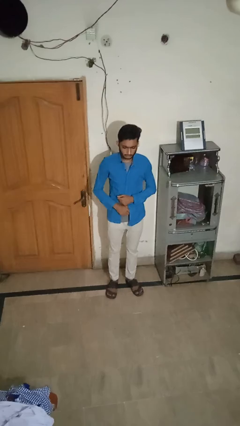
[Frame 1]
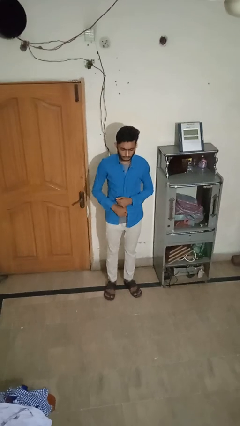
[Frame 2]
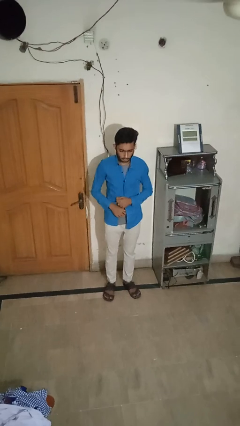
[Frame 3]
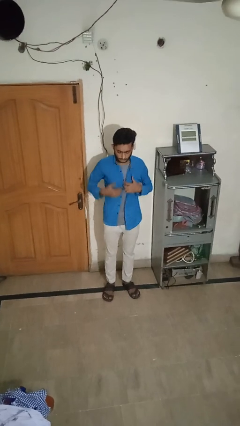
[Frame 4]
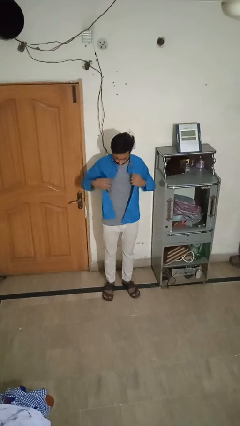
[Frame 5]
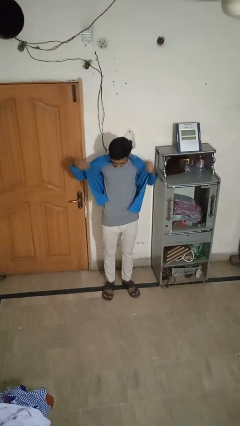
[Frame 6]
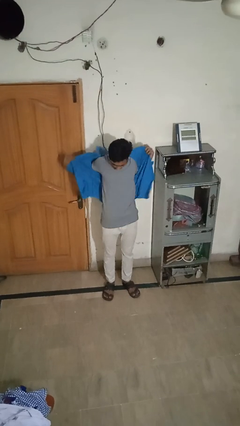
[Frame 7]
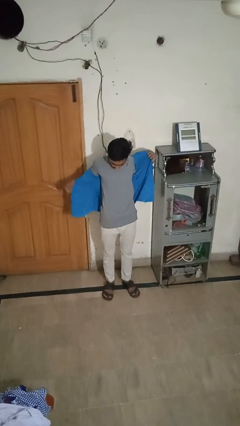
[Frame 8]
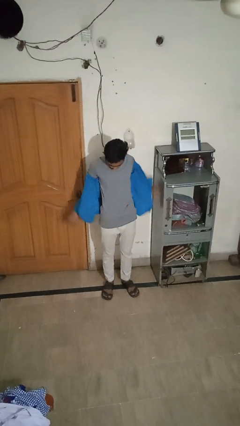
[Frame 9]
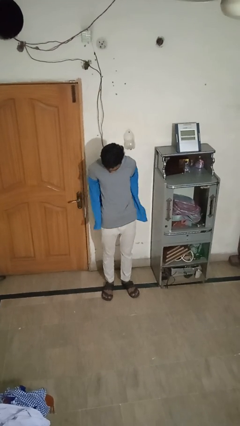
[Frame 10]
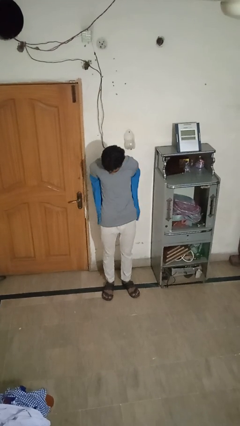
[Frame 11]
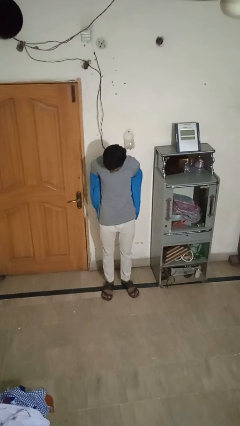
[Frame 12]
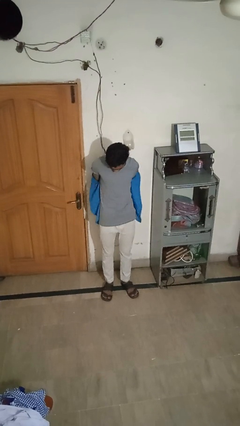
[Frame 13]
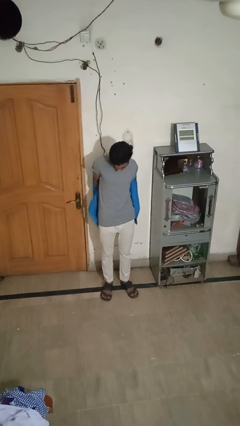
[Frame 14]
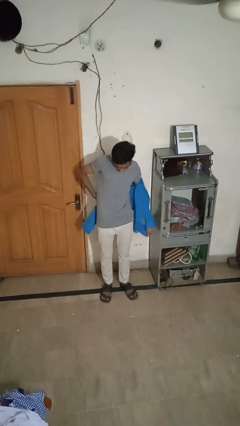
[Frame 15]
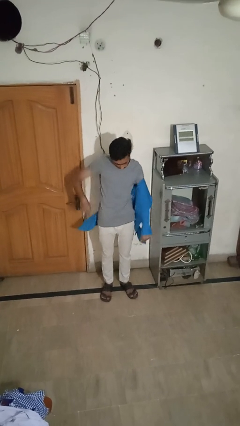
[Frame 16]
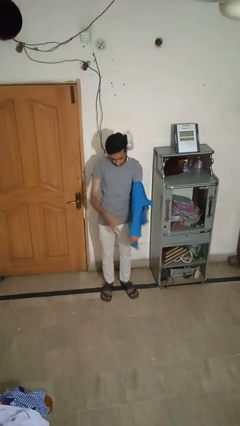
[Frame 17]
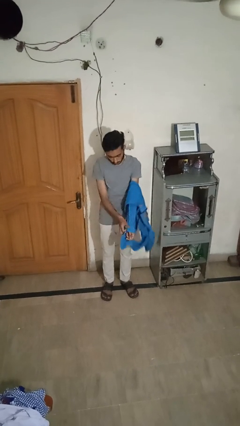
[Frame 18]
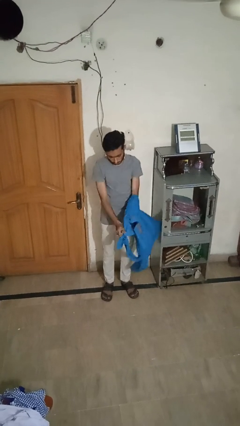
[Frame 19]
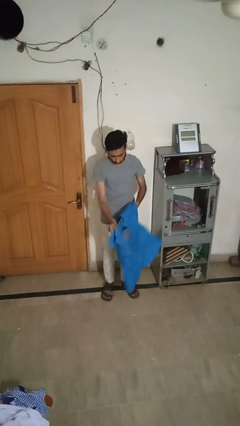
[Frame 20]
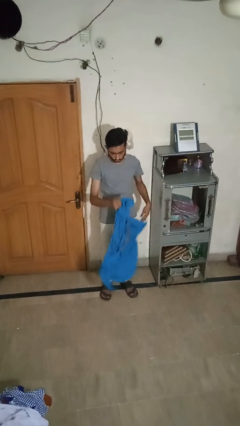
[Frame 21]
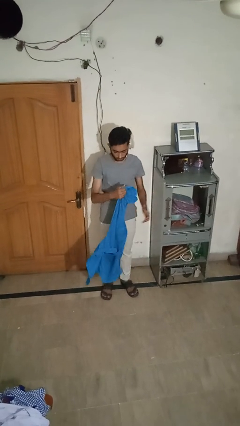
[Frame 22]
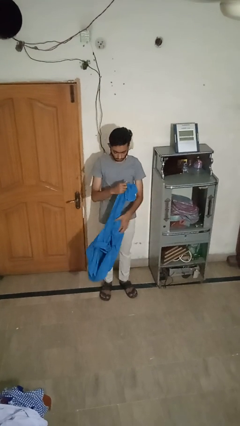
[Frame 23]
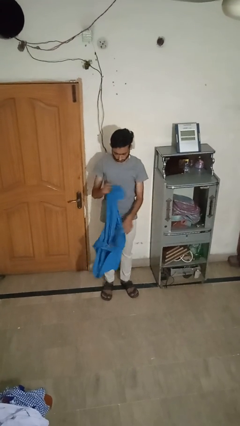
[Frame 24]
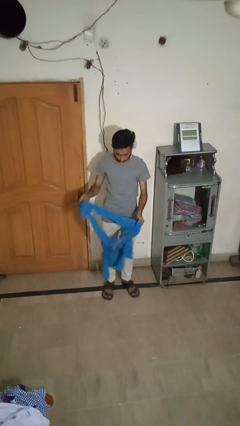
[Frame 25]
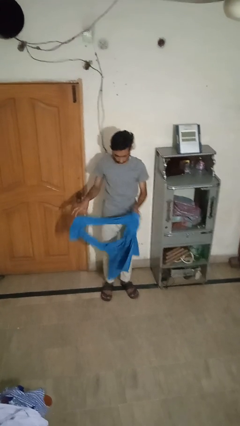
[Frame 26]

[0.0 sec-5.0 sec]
person takes off shirt

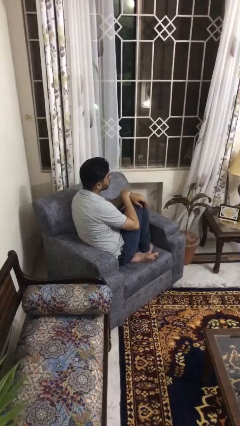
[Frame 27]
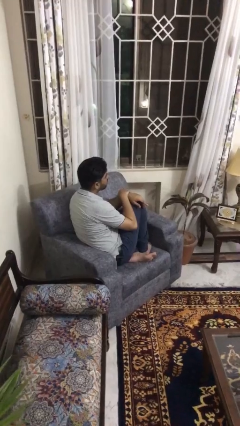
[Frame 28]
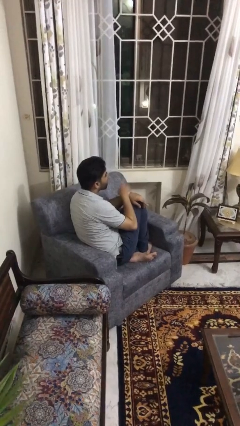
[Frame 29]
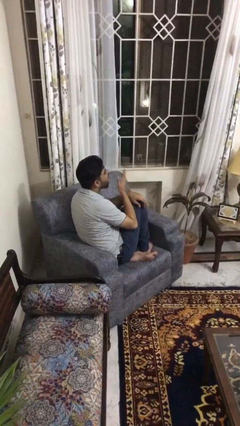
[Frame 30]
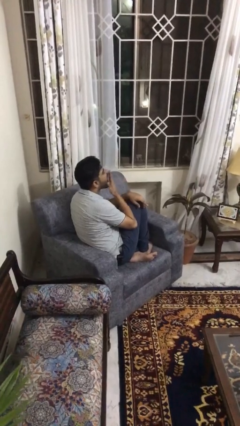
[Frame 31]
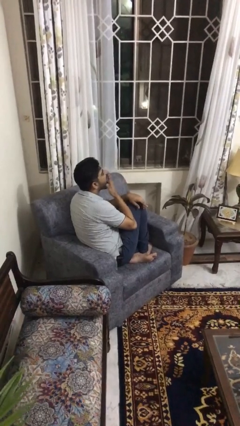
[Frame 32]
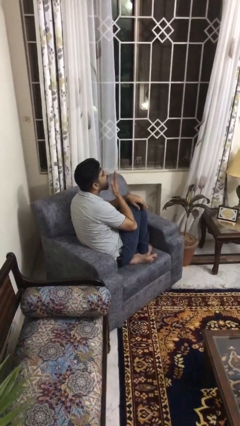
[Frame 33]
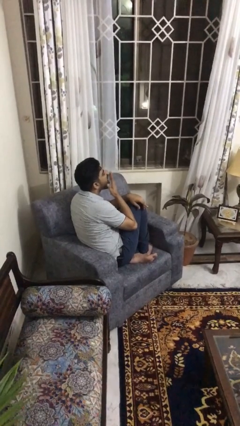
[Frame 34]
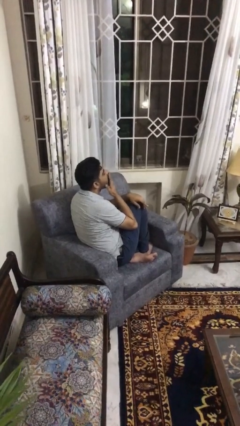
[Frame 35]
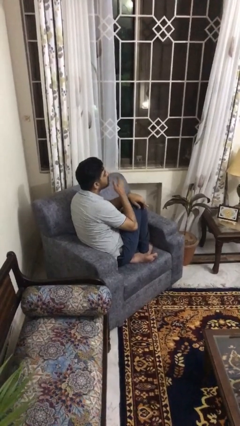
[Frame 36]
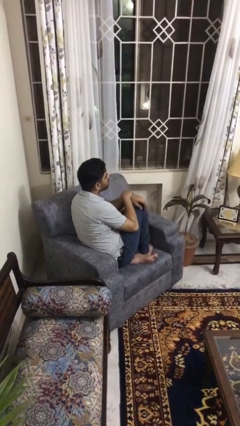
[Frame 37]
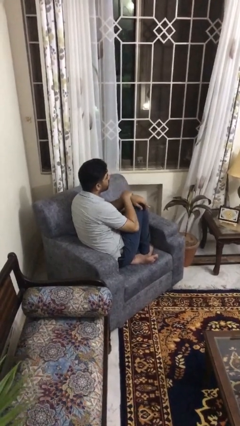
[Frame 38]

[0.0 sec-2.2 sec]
person yawns

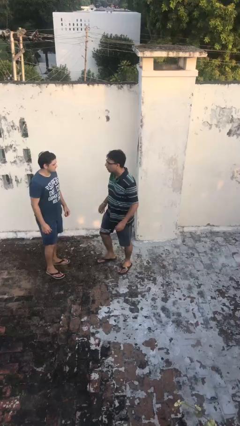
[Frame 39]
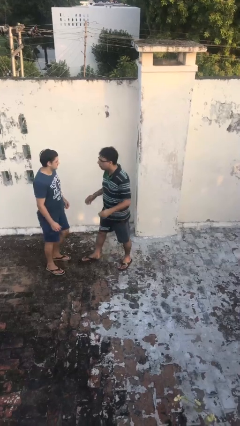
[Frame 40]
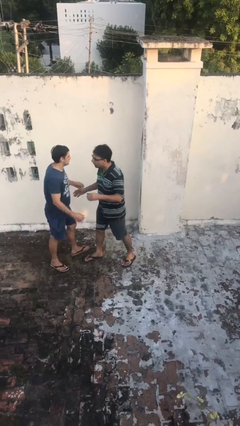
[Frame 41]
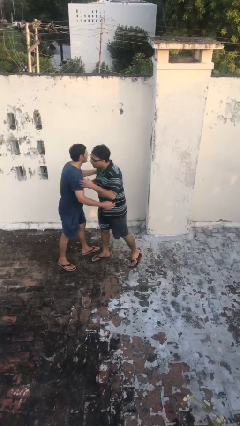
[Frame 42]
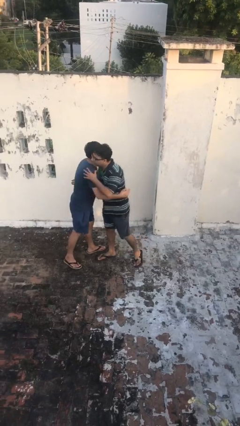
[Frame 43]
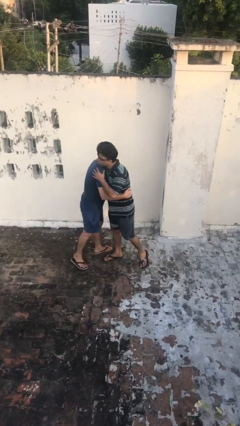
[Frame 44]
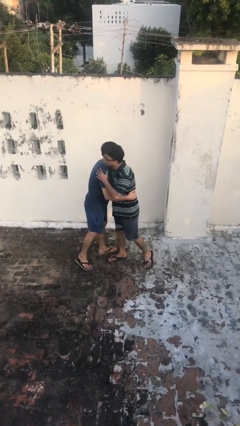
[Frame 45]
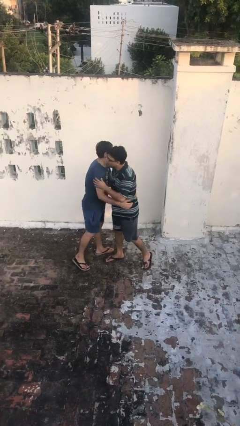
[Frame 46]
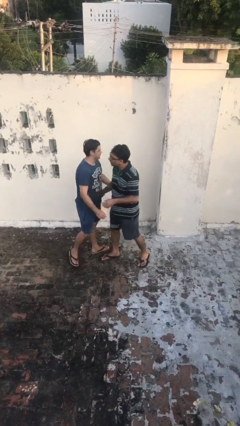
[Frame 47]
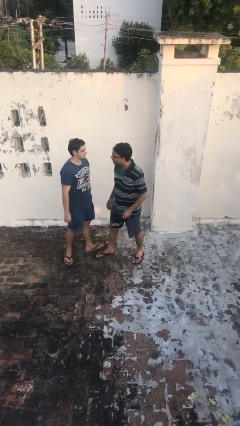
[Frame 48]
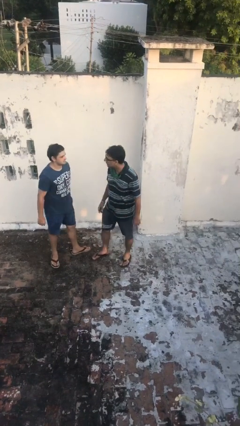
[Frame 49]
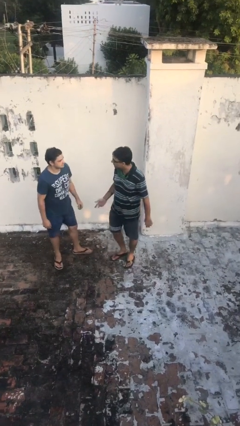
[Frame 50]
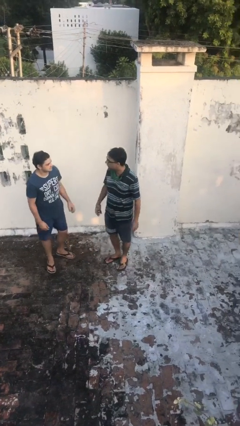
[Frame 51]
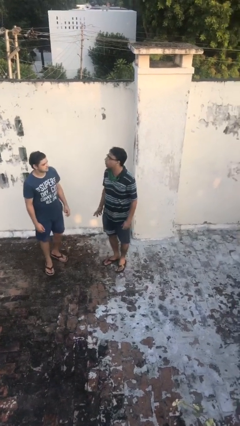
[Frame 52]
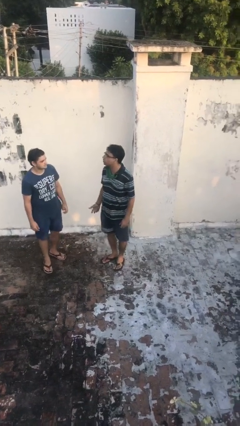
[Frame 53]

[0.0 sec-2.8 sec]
person embraces person

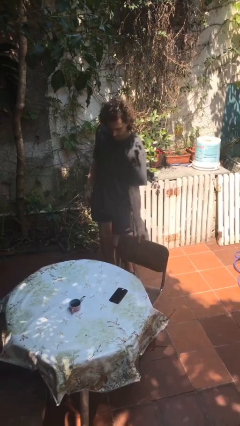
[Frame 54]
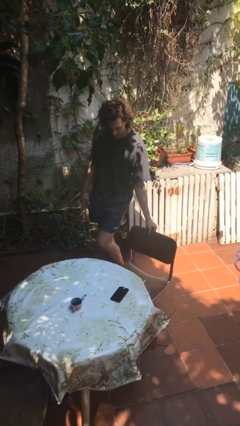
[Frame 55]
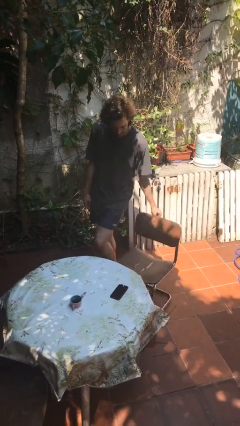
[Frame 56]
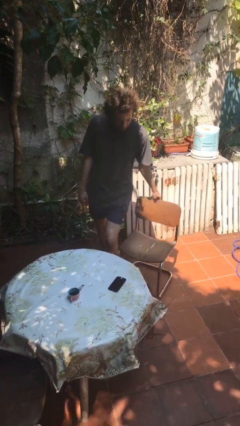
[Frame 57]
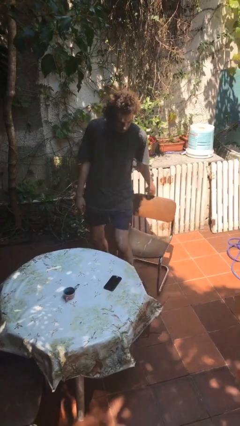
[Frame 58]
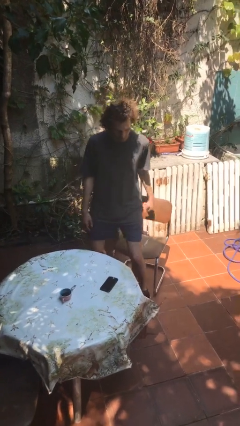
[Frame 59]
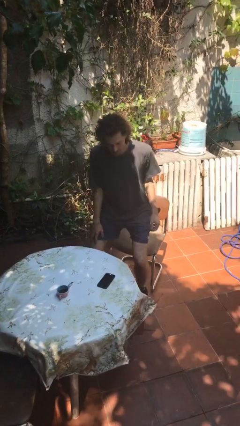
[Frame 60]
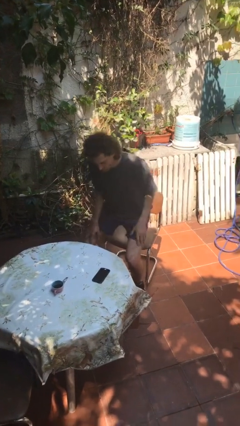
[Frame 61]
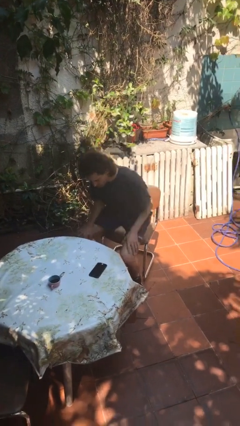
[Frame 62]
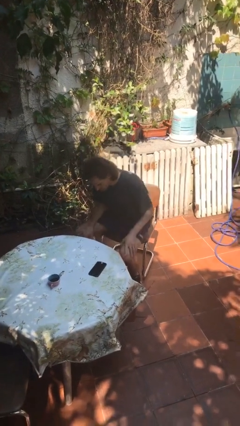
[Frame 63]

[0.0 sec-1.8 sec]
person sits down

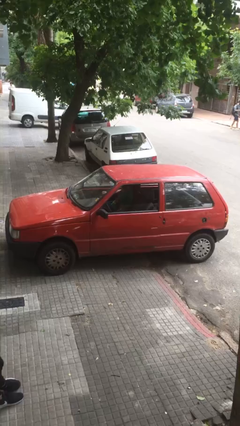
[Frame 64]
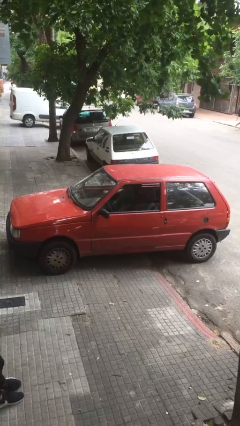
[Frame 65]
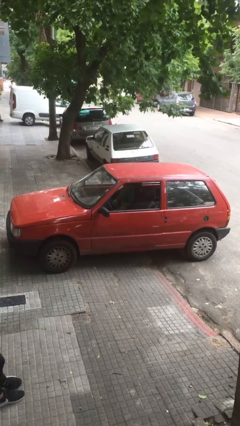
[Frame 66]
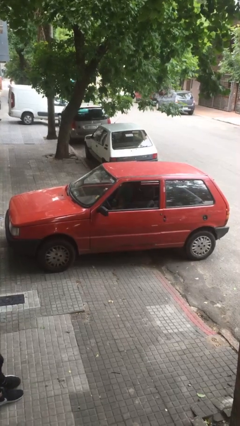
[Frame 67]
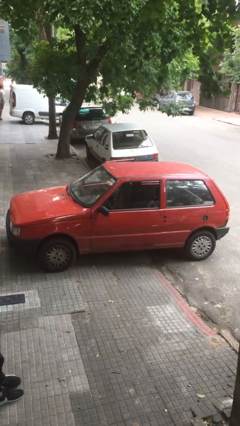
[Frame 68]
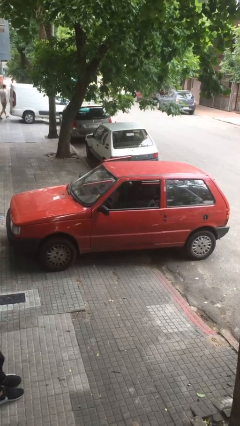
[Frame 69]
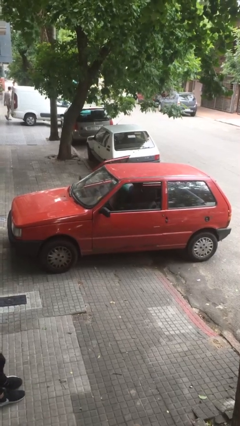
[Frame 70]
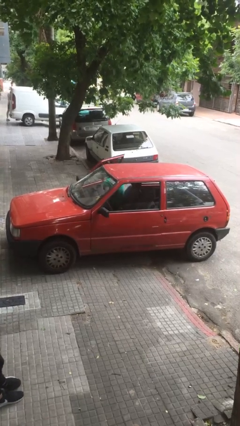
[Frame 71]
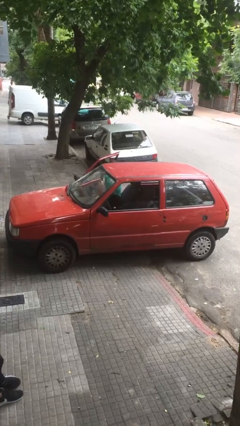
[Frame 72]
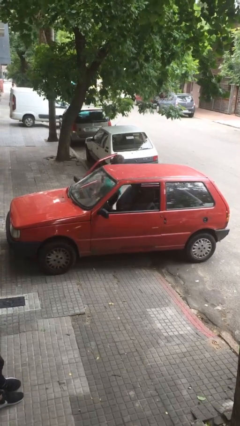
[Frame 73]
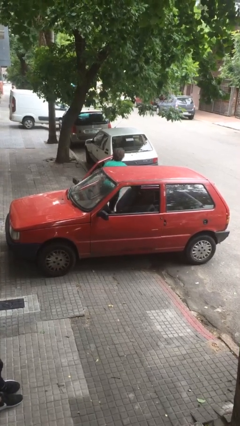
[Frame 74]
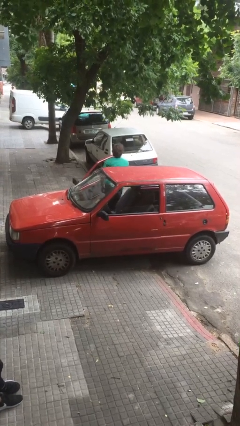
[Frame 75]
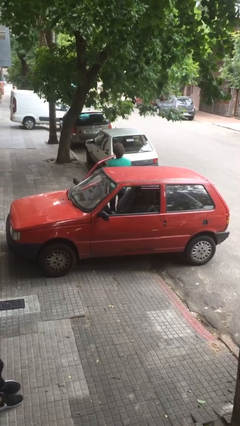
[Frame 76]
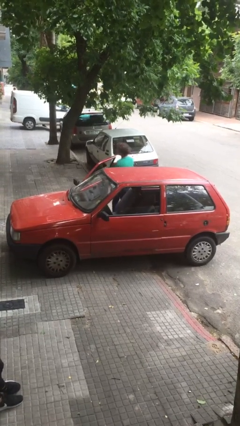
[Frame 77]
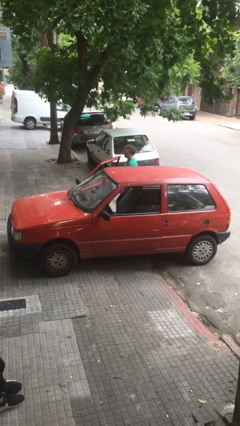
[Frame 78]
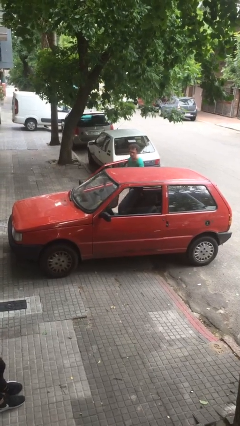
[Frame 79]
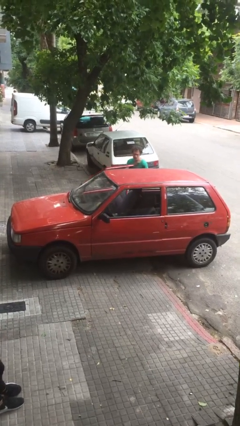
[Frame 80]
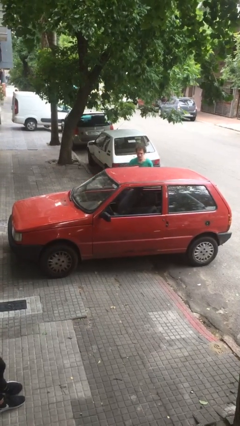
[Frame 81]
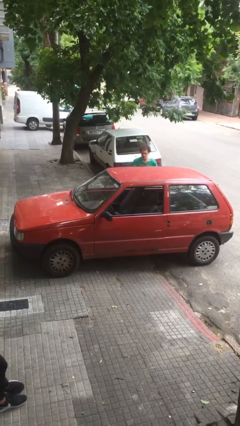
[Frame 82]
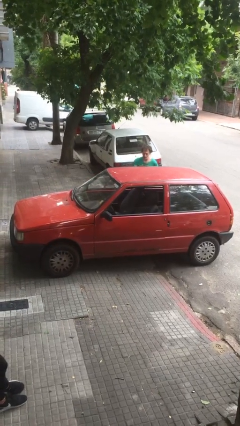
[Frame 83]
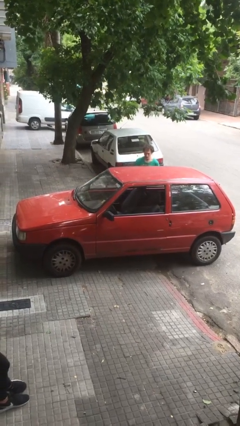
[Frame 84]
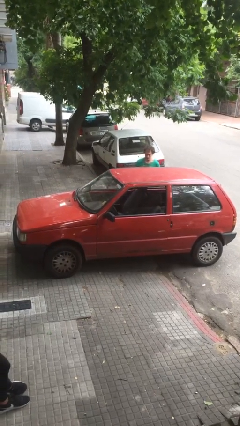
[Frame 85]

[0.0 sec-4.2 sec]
car drops off person

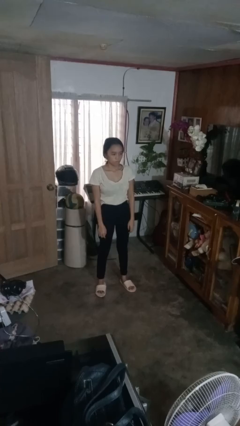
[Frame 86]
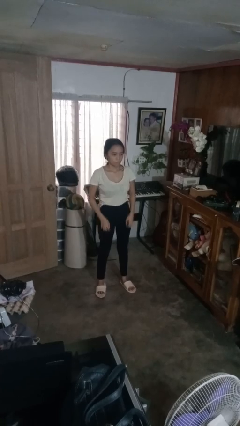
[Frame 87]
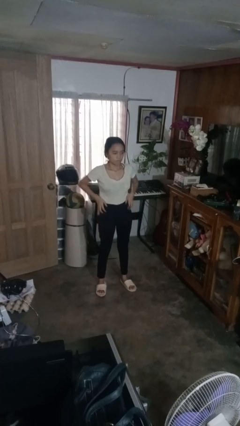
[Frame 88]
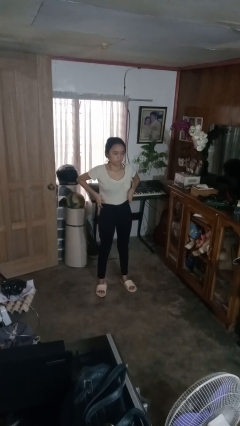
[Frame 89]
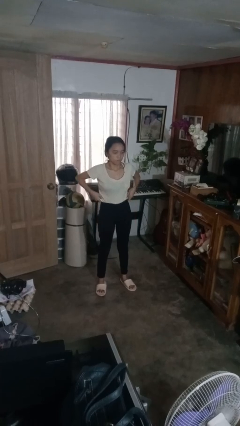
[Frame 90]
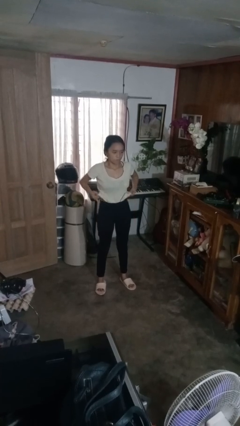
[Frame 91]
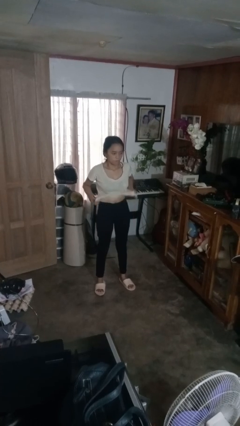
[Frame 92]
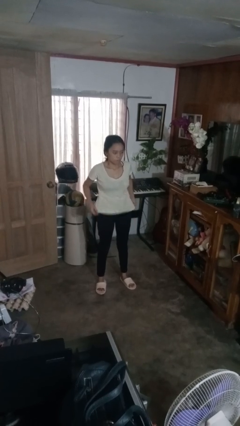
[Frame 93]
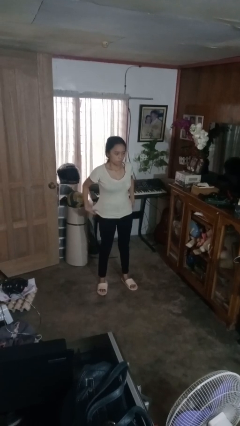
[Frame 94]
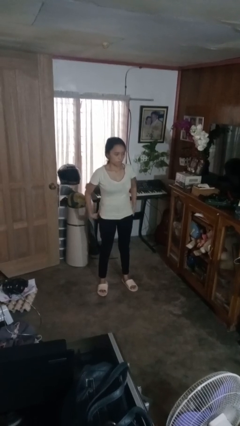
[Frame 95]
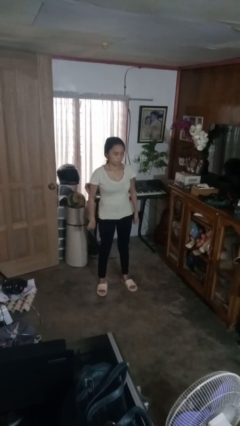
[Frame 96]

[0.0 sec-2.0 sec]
person untucks shirt
